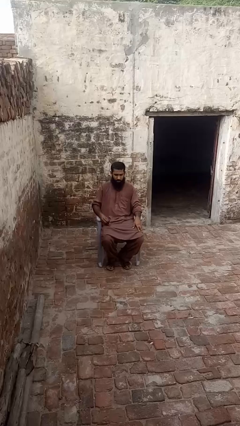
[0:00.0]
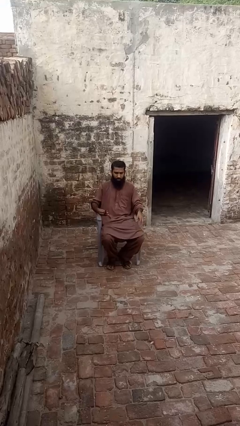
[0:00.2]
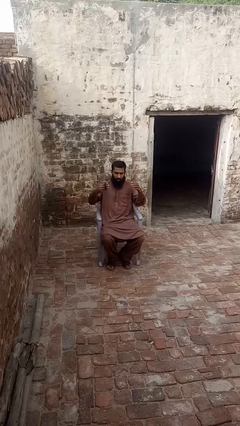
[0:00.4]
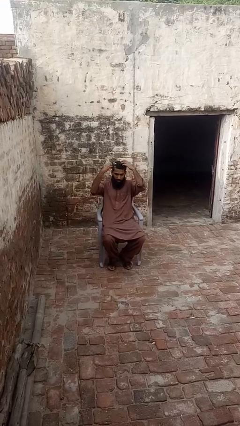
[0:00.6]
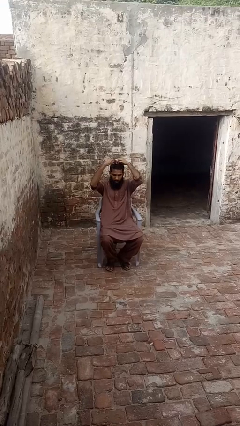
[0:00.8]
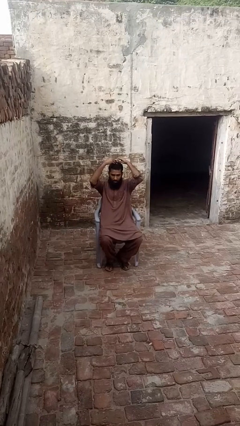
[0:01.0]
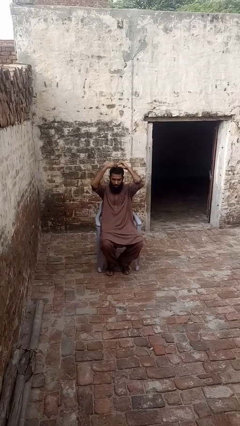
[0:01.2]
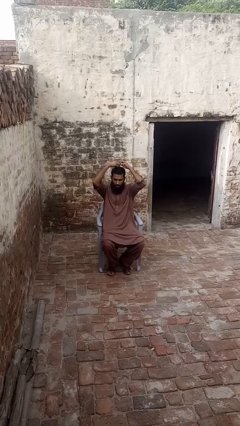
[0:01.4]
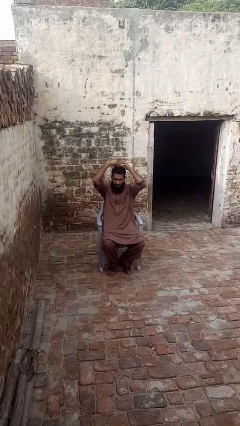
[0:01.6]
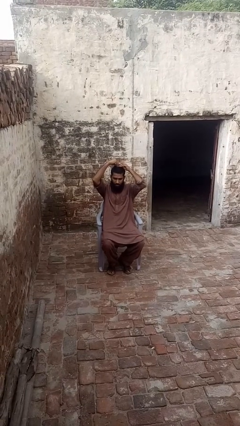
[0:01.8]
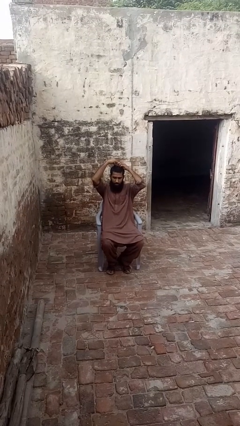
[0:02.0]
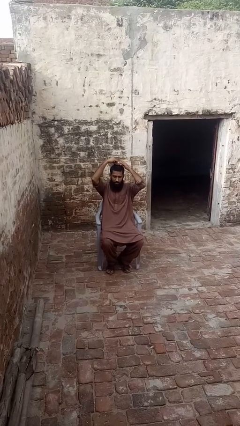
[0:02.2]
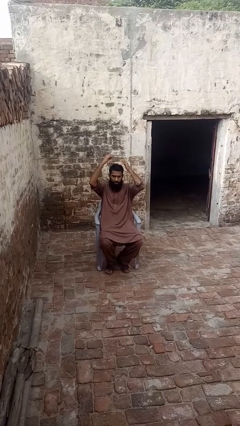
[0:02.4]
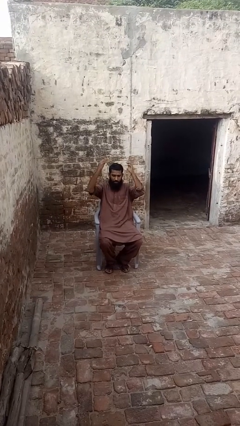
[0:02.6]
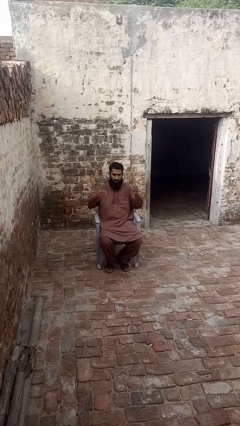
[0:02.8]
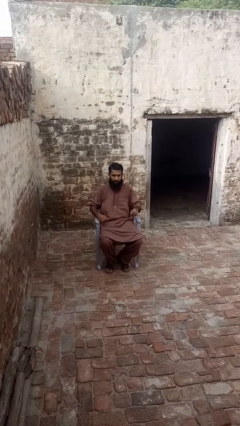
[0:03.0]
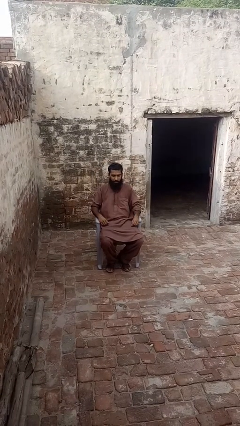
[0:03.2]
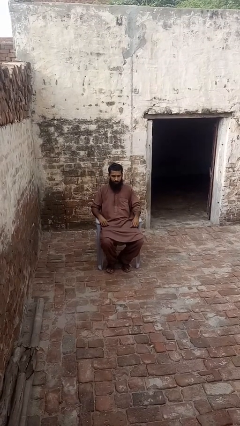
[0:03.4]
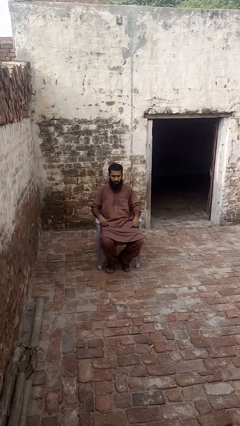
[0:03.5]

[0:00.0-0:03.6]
person puts hair in ponytail

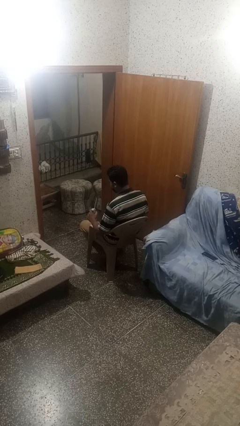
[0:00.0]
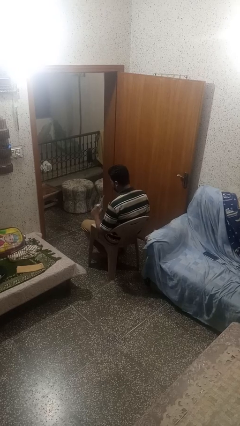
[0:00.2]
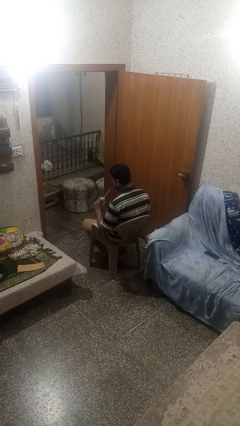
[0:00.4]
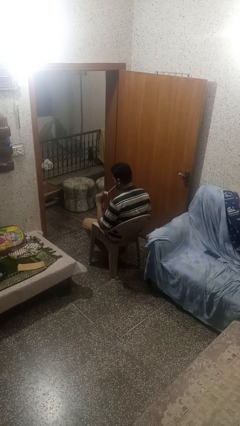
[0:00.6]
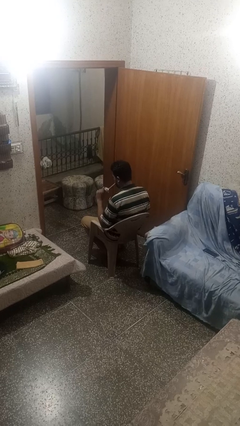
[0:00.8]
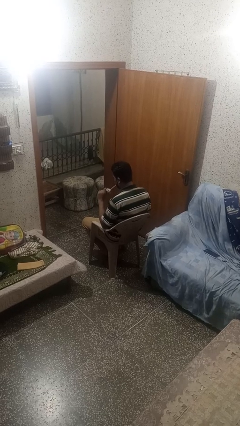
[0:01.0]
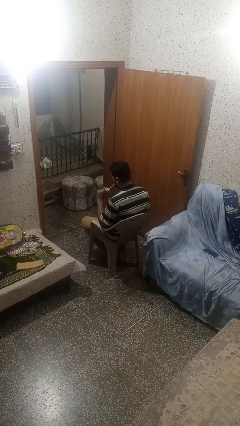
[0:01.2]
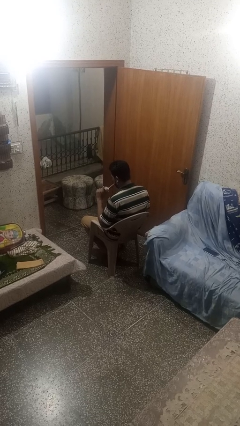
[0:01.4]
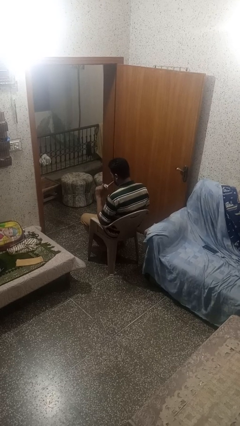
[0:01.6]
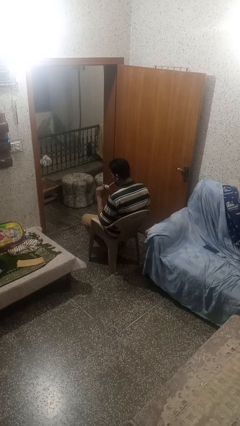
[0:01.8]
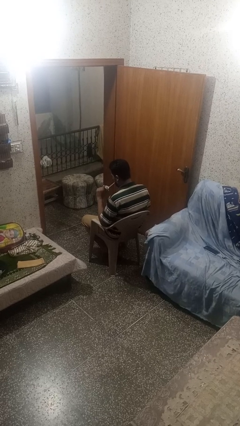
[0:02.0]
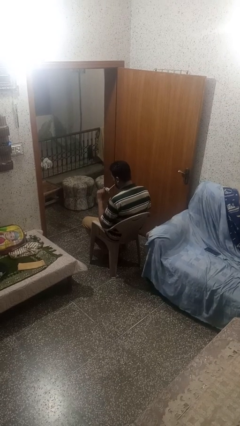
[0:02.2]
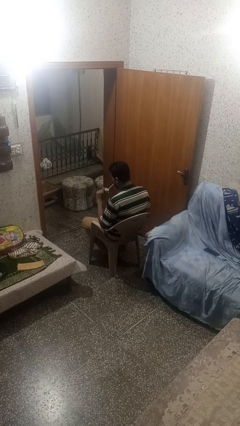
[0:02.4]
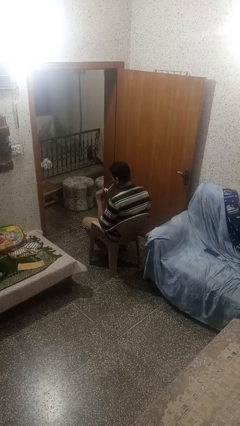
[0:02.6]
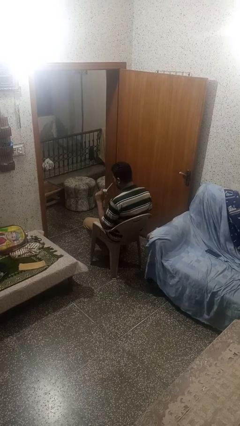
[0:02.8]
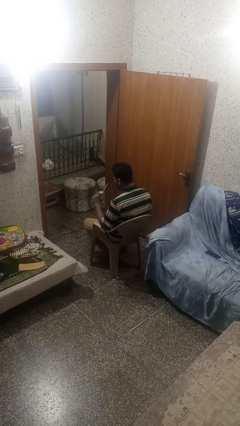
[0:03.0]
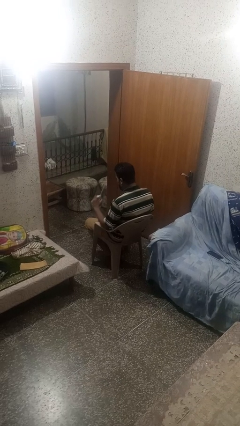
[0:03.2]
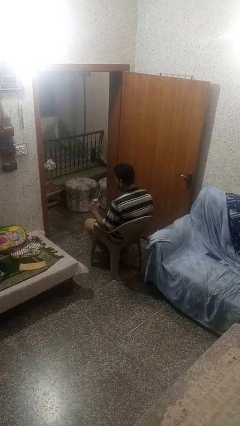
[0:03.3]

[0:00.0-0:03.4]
person drinks from straw

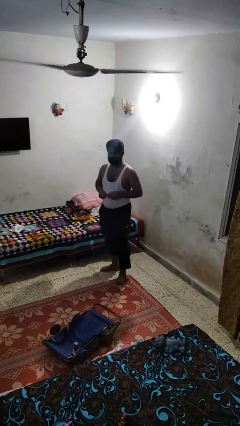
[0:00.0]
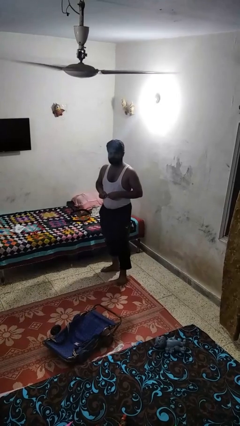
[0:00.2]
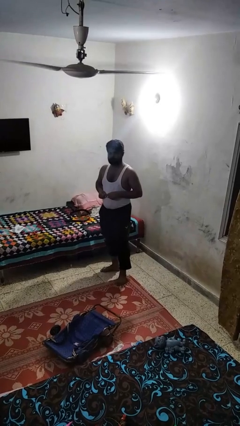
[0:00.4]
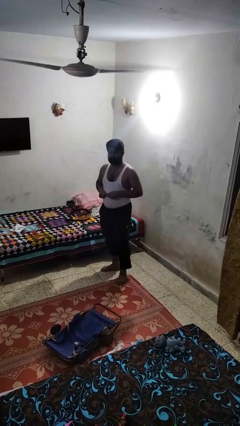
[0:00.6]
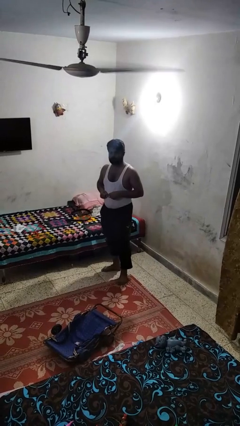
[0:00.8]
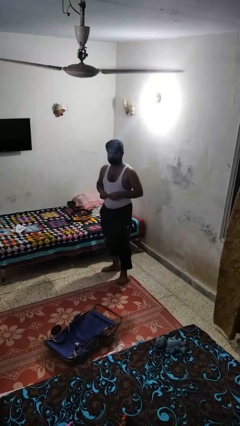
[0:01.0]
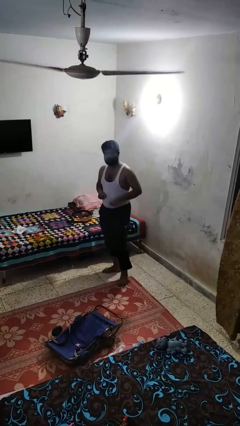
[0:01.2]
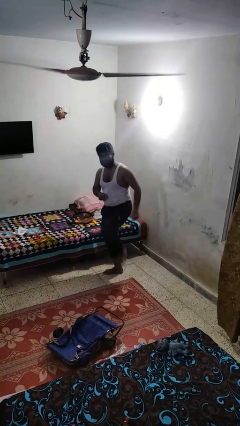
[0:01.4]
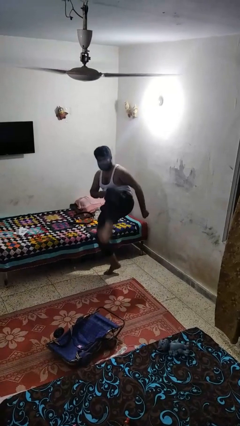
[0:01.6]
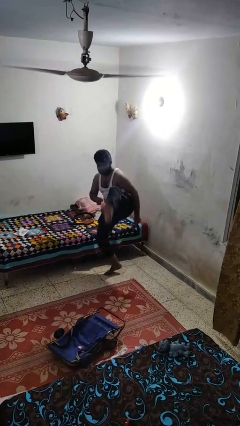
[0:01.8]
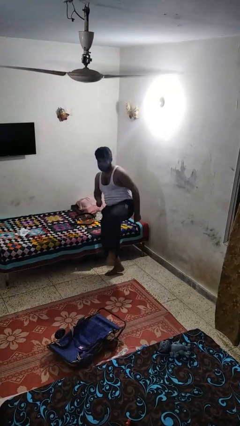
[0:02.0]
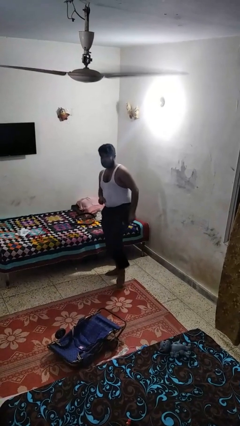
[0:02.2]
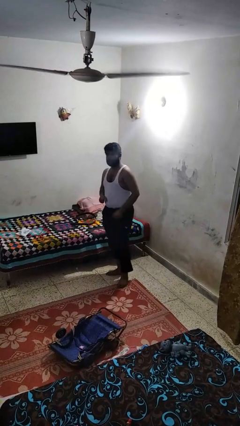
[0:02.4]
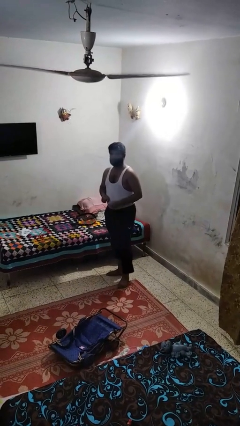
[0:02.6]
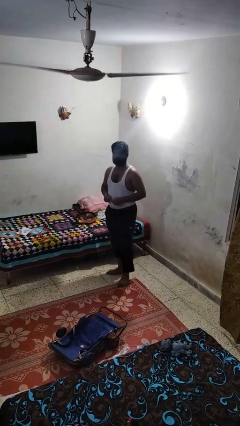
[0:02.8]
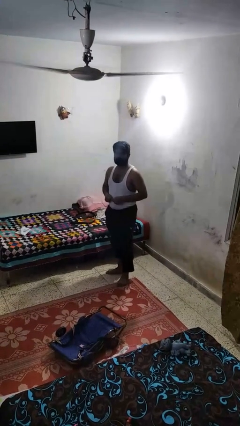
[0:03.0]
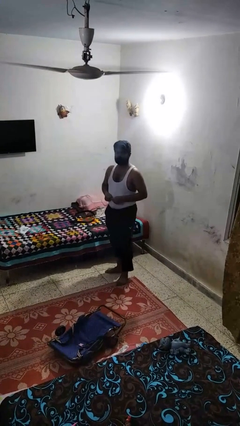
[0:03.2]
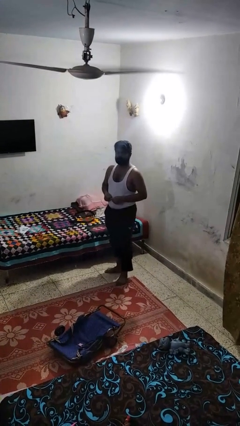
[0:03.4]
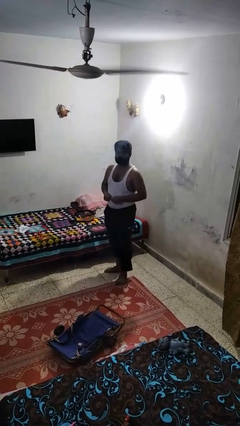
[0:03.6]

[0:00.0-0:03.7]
person karate kicks

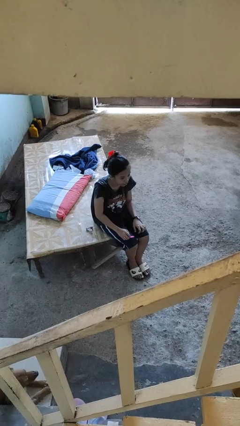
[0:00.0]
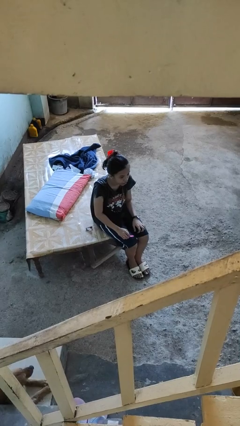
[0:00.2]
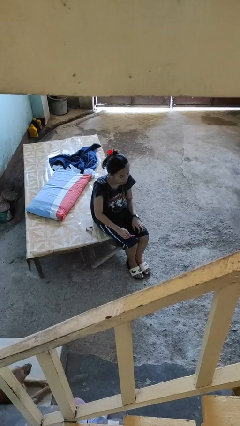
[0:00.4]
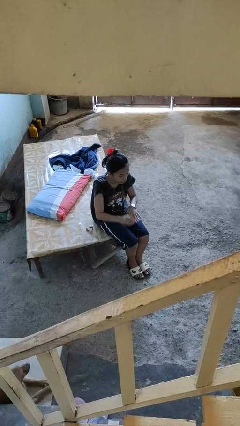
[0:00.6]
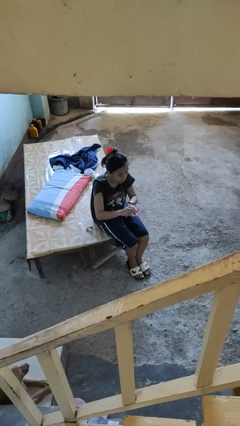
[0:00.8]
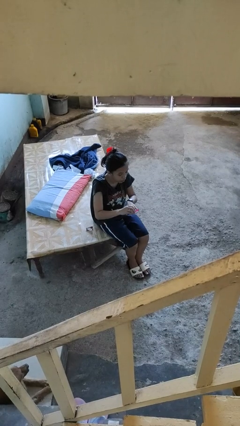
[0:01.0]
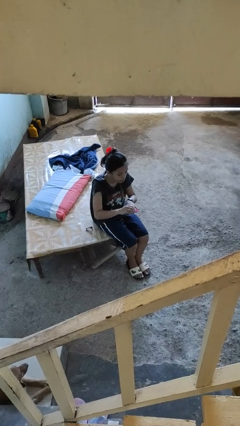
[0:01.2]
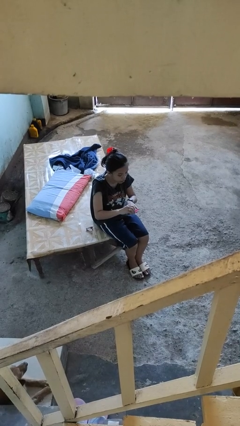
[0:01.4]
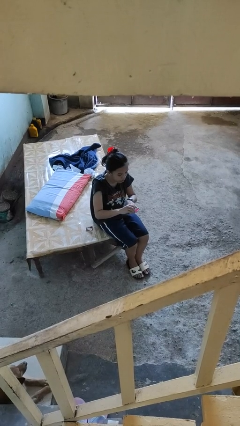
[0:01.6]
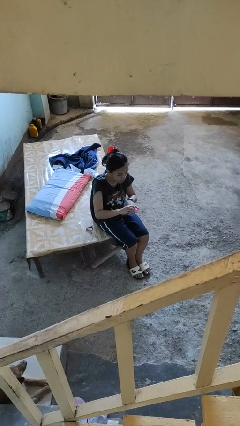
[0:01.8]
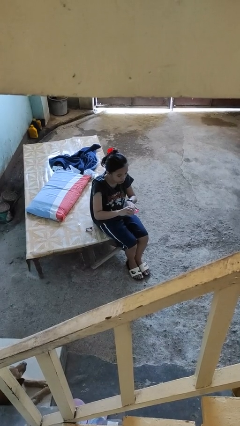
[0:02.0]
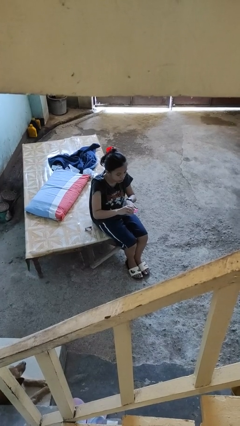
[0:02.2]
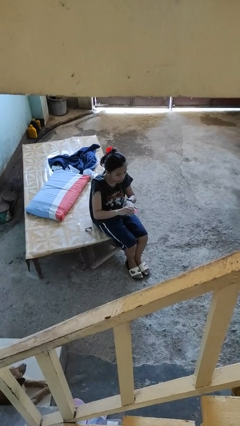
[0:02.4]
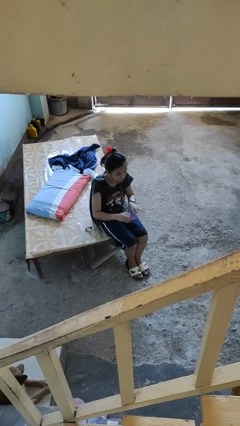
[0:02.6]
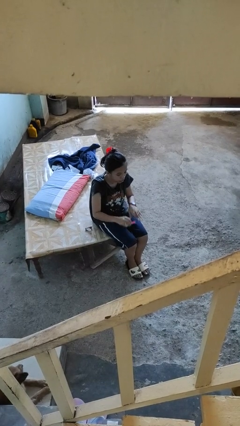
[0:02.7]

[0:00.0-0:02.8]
person files fingernails

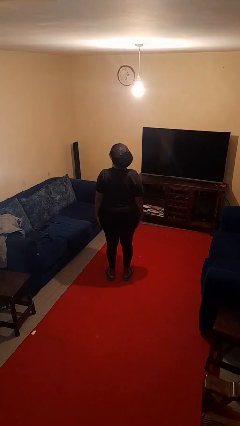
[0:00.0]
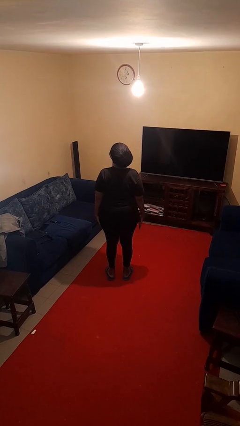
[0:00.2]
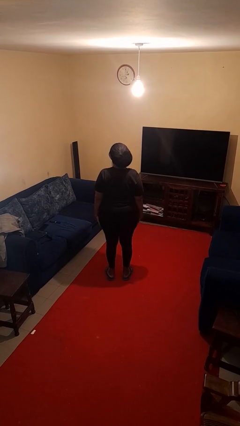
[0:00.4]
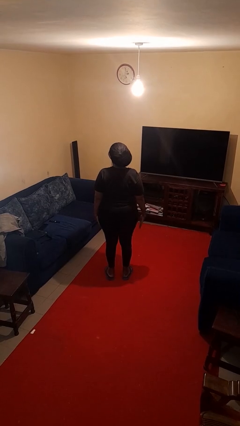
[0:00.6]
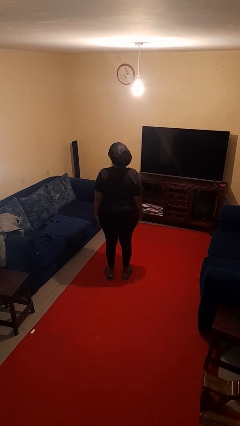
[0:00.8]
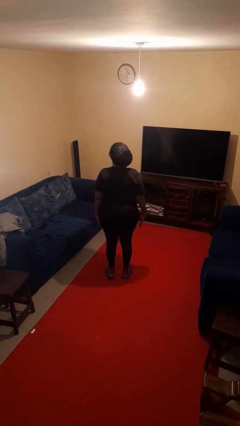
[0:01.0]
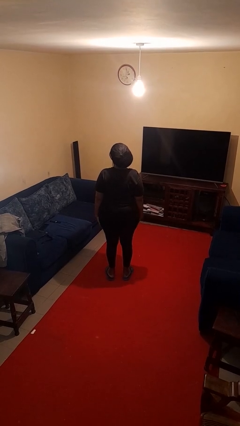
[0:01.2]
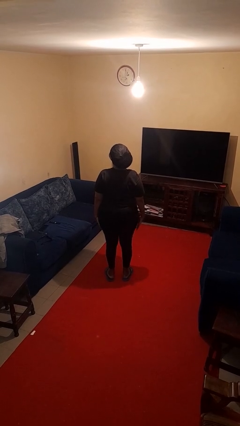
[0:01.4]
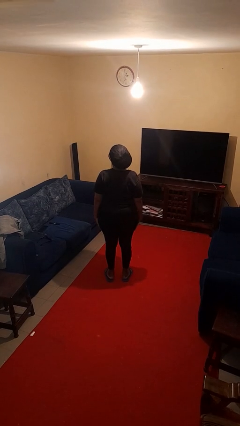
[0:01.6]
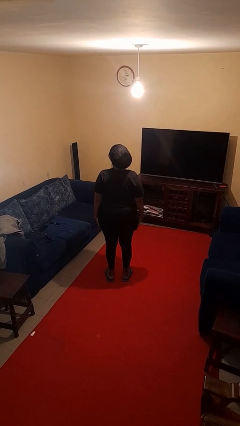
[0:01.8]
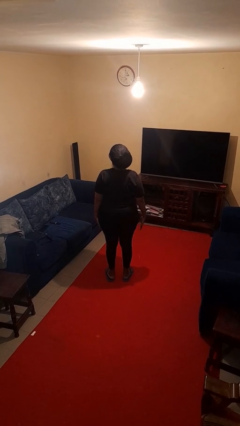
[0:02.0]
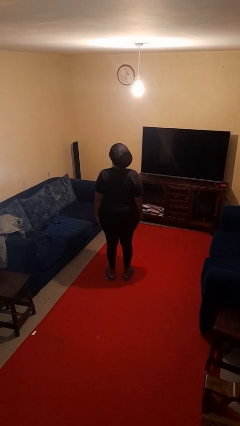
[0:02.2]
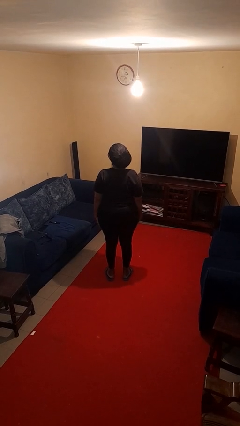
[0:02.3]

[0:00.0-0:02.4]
person slaps hands on thighs

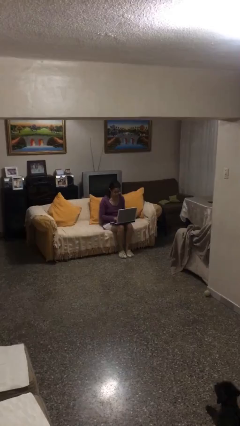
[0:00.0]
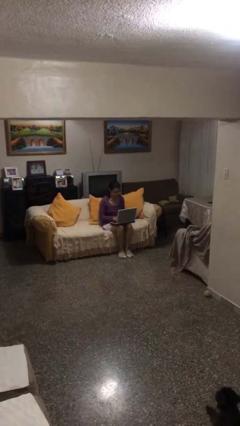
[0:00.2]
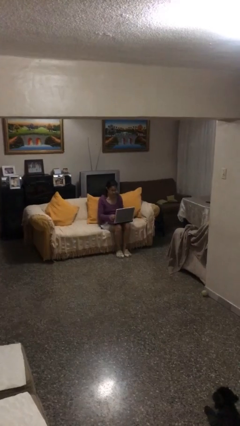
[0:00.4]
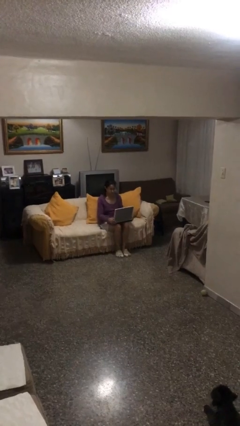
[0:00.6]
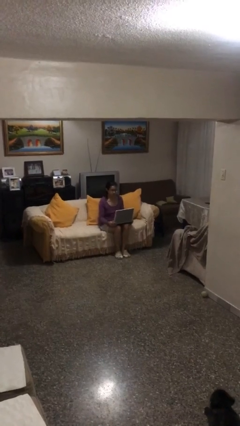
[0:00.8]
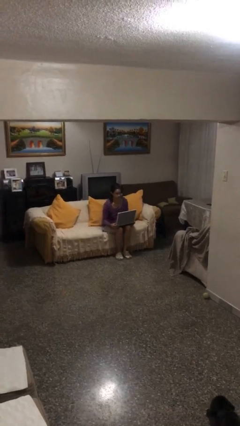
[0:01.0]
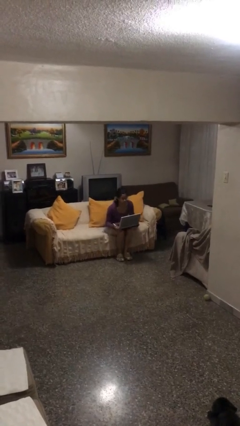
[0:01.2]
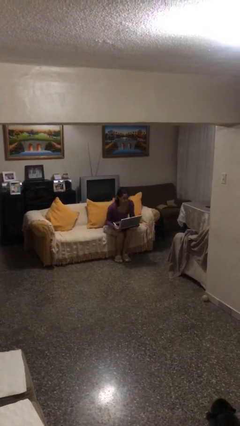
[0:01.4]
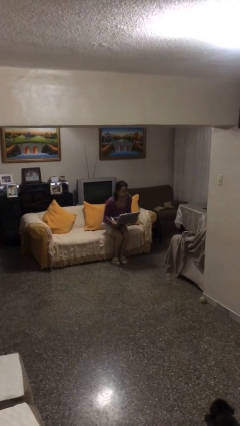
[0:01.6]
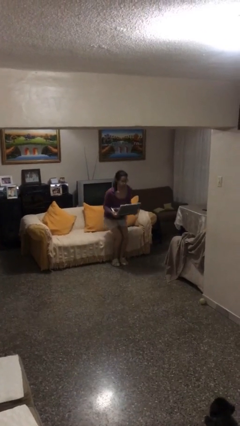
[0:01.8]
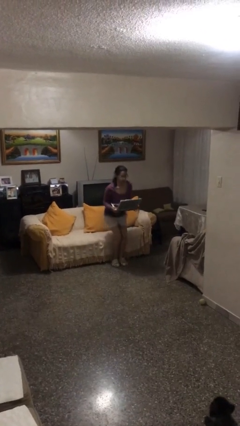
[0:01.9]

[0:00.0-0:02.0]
person stands up
